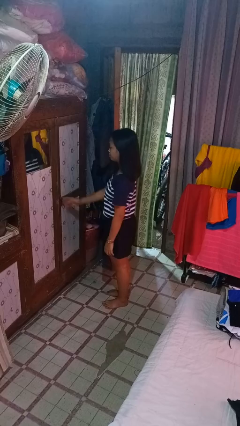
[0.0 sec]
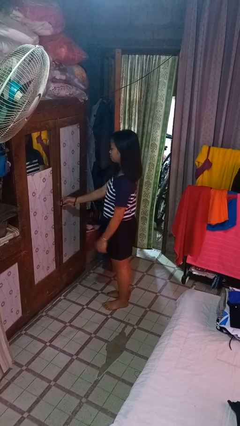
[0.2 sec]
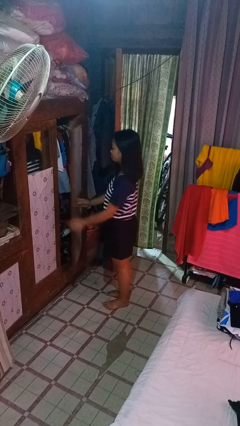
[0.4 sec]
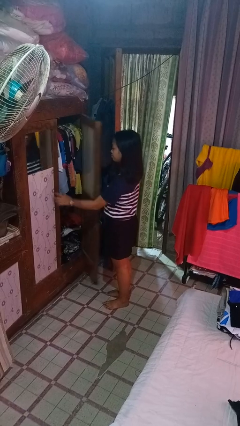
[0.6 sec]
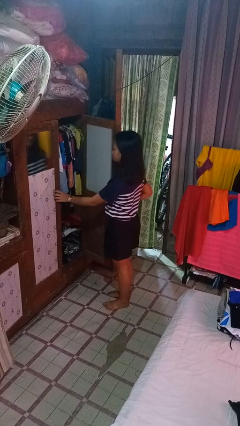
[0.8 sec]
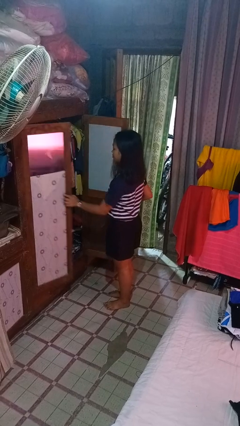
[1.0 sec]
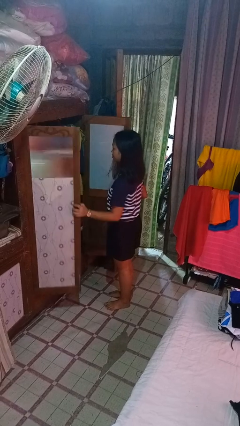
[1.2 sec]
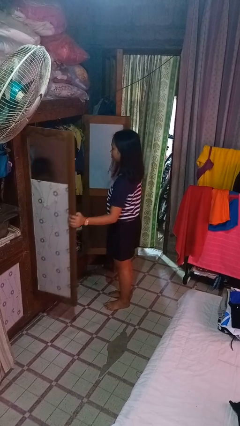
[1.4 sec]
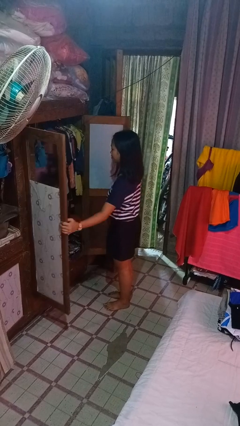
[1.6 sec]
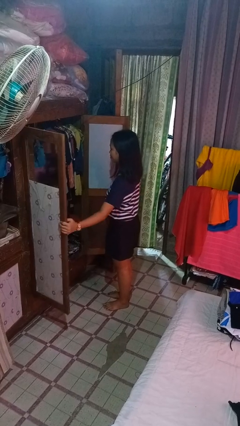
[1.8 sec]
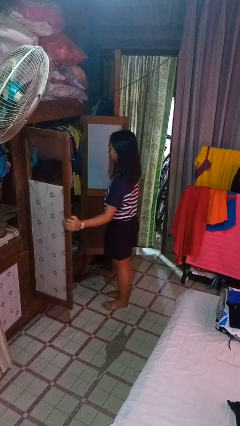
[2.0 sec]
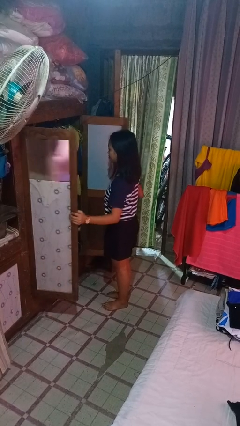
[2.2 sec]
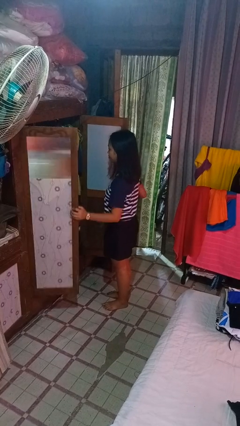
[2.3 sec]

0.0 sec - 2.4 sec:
person opens closet door

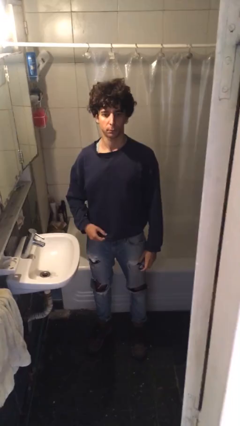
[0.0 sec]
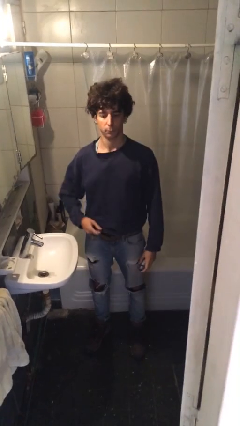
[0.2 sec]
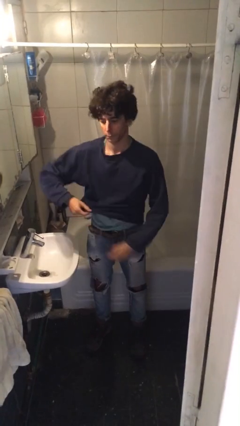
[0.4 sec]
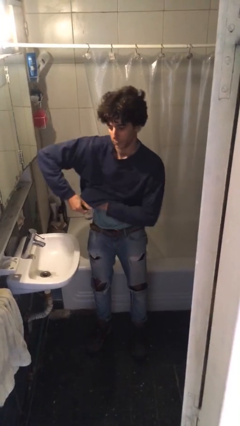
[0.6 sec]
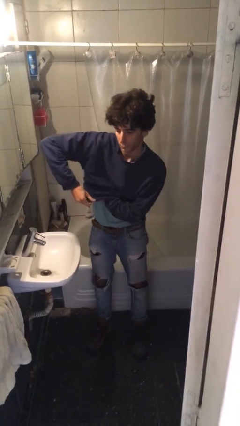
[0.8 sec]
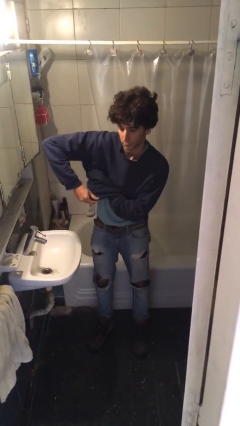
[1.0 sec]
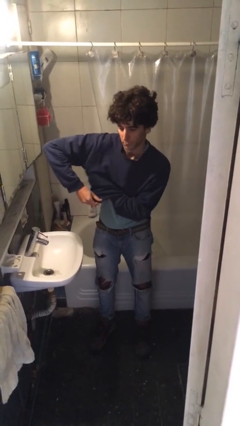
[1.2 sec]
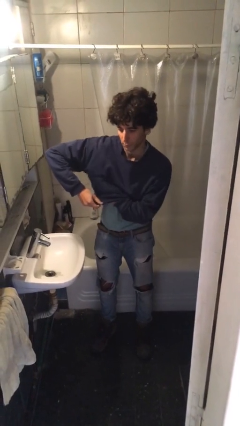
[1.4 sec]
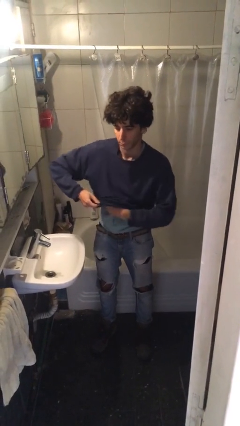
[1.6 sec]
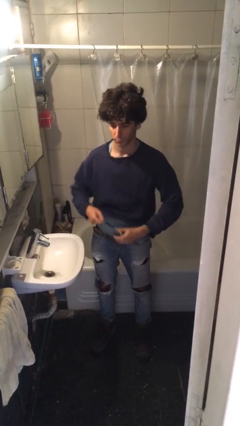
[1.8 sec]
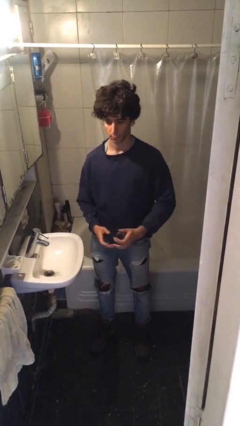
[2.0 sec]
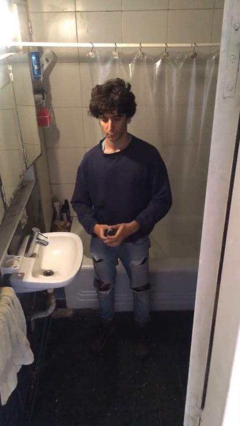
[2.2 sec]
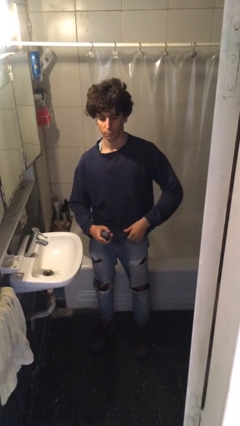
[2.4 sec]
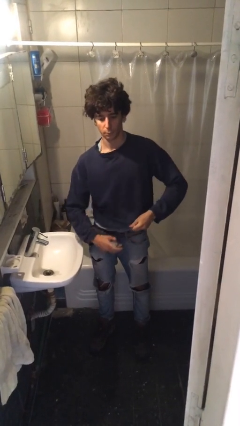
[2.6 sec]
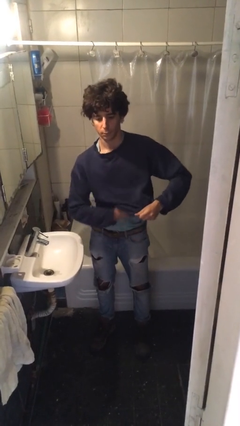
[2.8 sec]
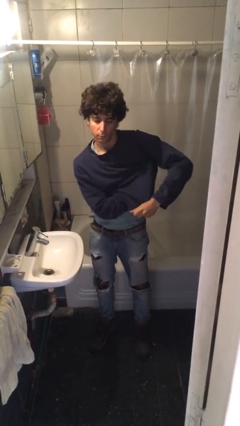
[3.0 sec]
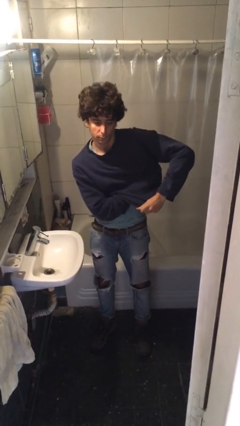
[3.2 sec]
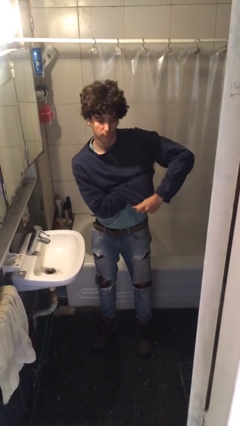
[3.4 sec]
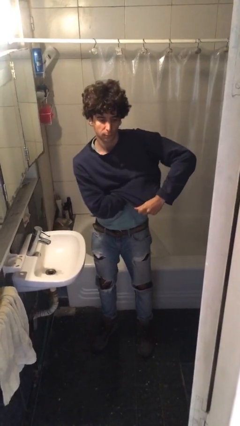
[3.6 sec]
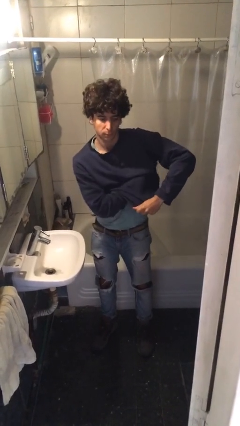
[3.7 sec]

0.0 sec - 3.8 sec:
person applies deodorant

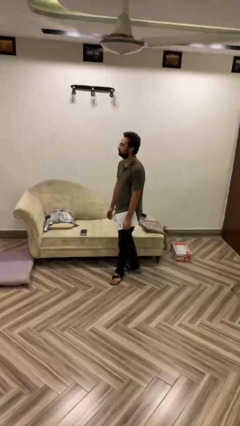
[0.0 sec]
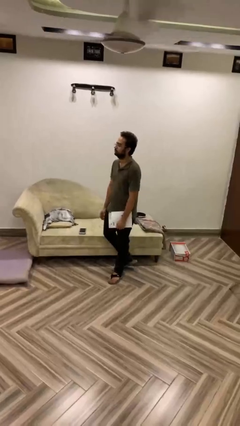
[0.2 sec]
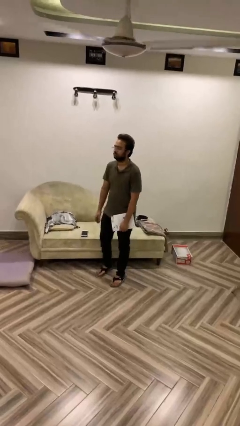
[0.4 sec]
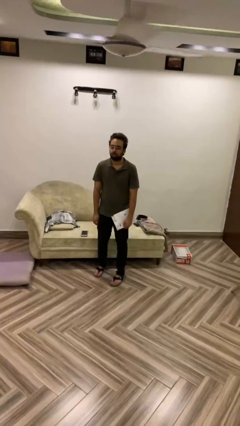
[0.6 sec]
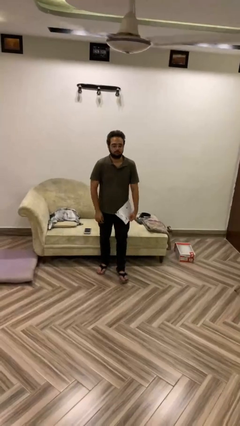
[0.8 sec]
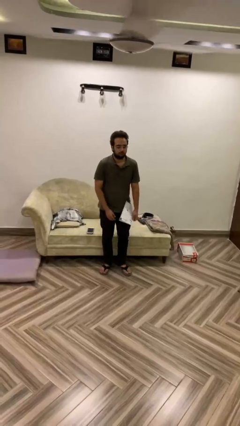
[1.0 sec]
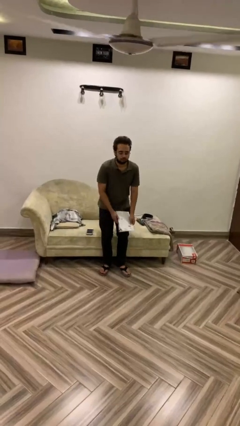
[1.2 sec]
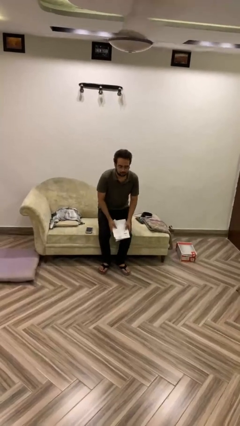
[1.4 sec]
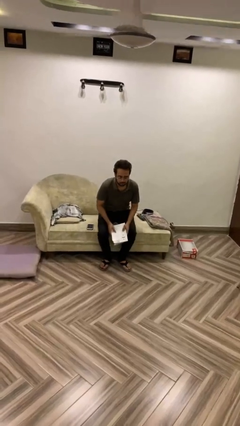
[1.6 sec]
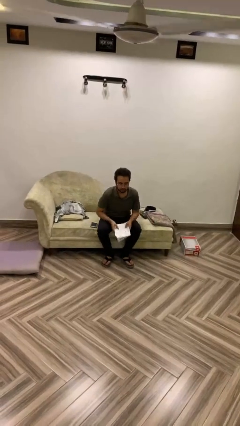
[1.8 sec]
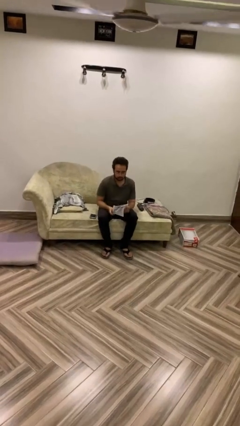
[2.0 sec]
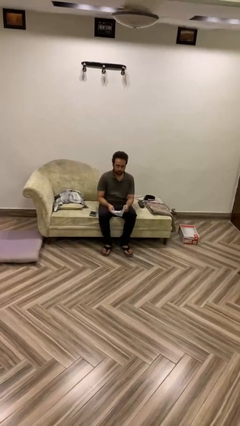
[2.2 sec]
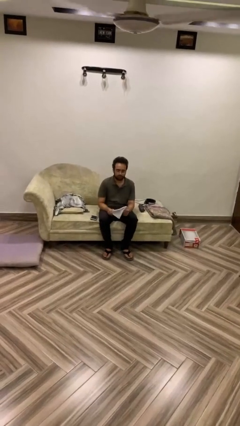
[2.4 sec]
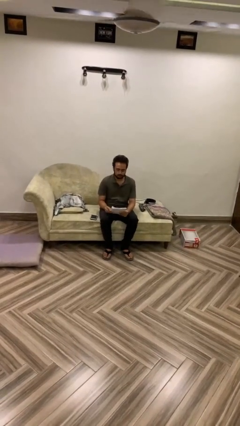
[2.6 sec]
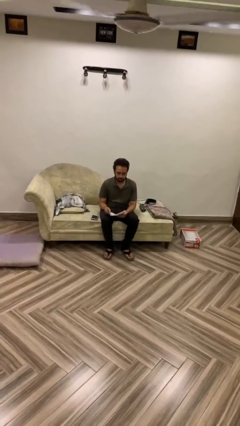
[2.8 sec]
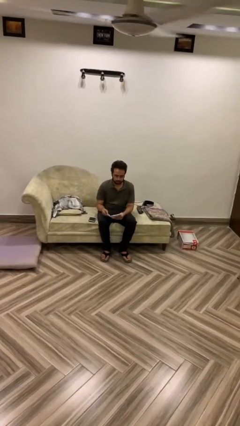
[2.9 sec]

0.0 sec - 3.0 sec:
person sits down

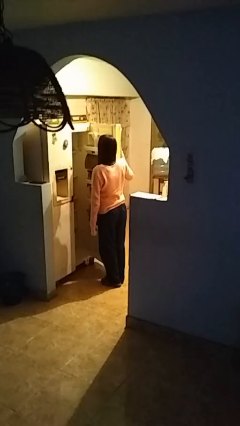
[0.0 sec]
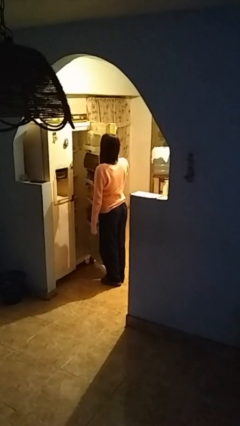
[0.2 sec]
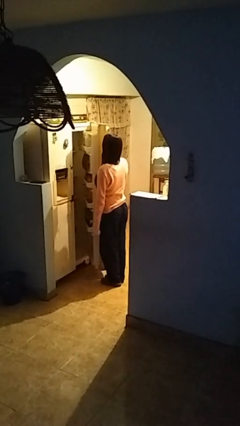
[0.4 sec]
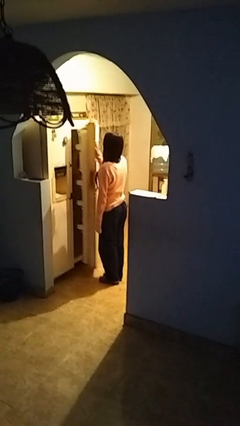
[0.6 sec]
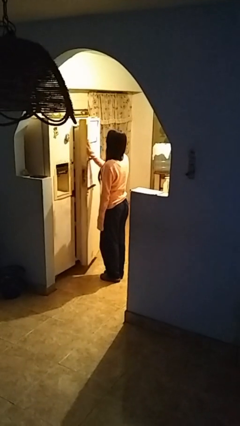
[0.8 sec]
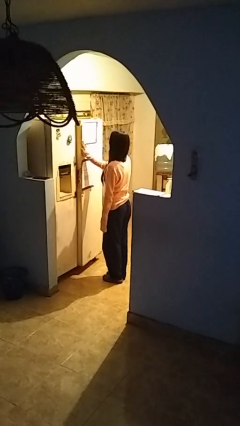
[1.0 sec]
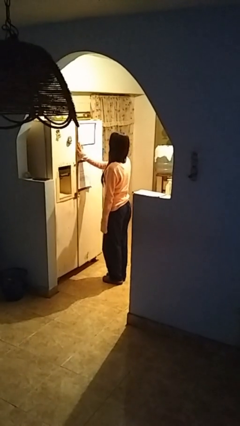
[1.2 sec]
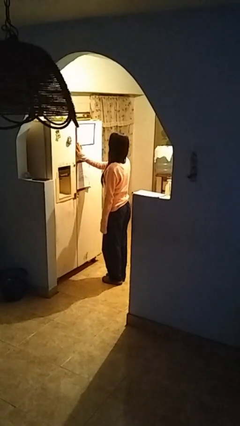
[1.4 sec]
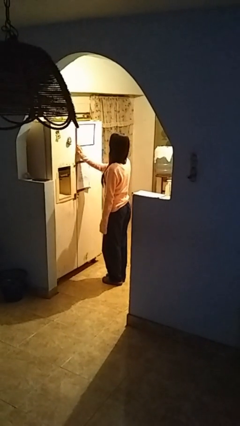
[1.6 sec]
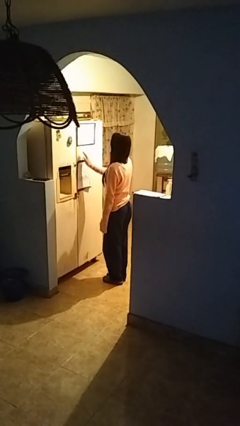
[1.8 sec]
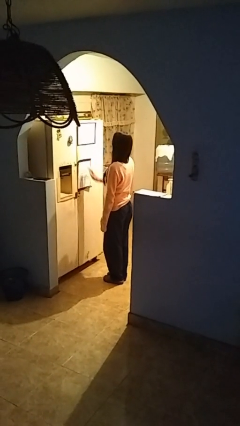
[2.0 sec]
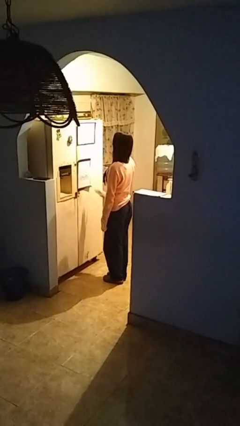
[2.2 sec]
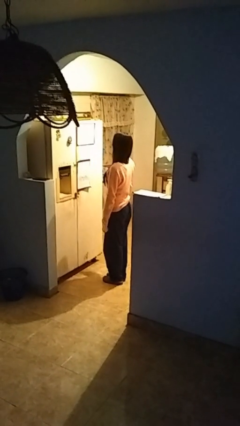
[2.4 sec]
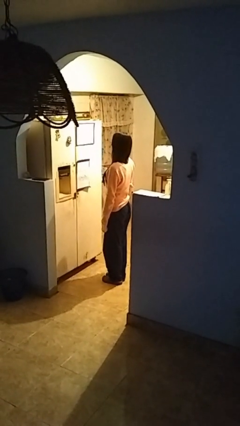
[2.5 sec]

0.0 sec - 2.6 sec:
person closes refrigerator

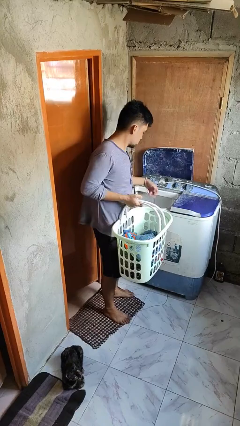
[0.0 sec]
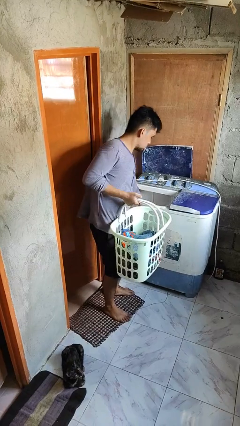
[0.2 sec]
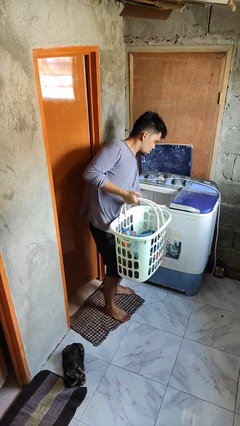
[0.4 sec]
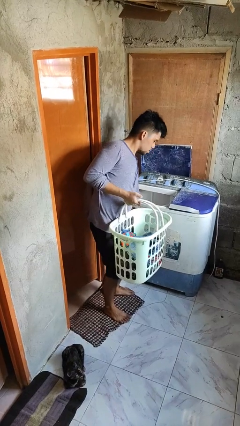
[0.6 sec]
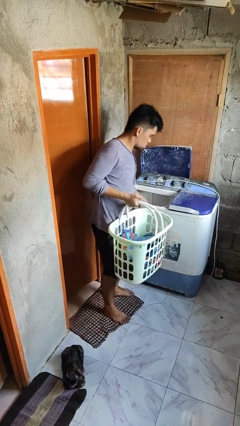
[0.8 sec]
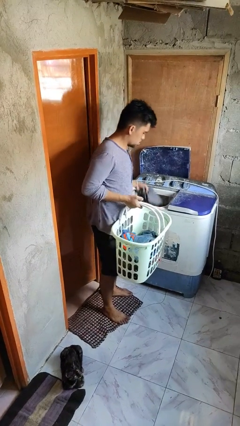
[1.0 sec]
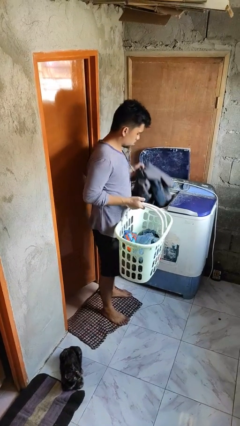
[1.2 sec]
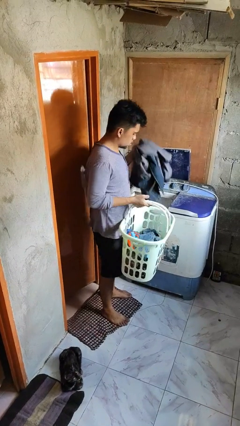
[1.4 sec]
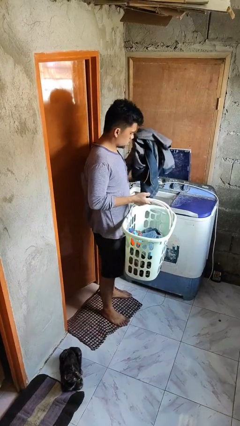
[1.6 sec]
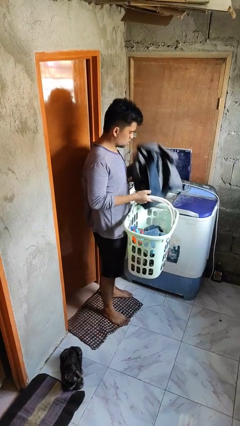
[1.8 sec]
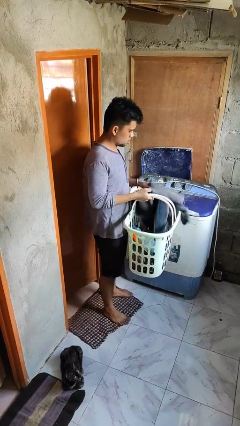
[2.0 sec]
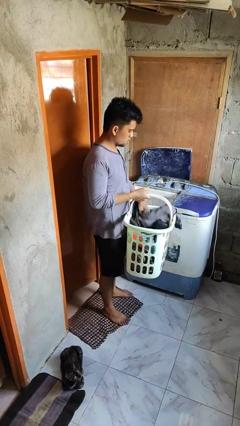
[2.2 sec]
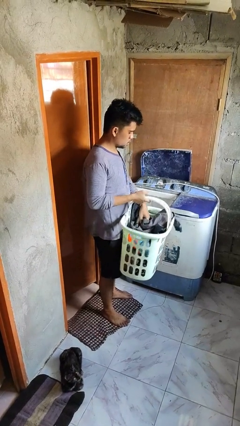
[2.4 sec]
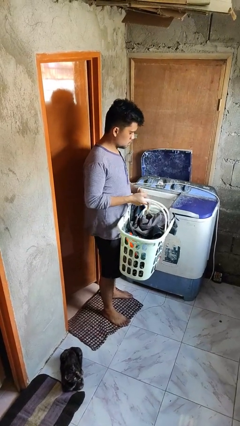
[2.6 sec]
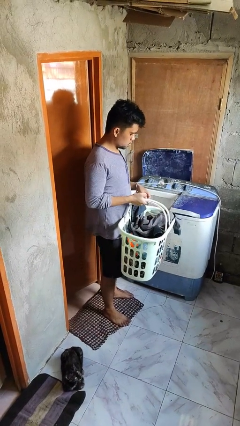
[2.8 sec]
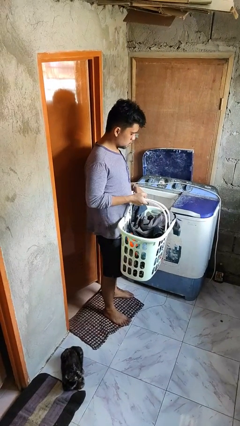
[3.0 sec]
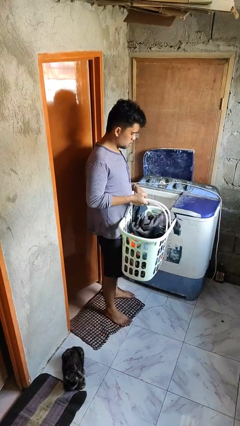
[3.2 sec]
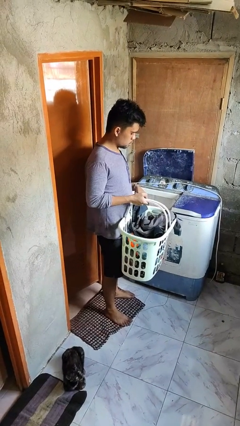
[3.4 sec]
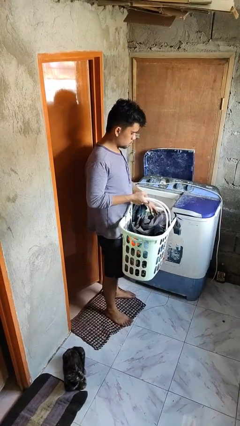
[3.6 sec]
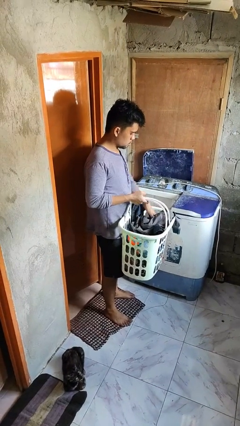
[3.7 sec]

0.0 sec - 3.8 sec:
person unloads clotheswasher

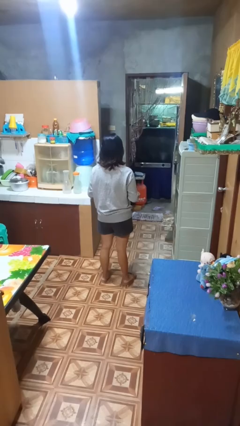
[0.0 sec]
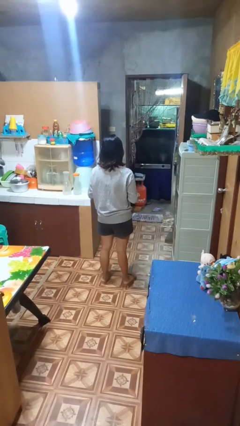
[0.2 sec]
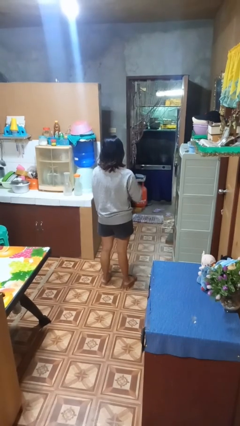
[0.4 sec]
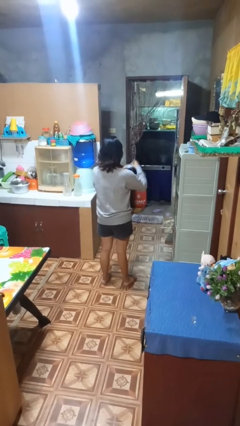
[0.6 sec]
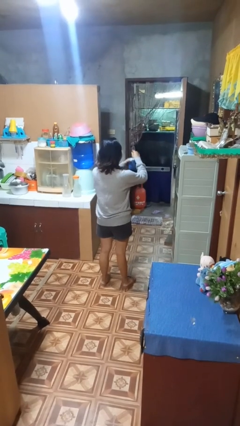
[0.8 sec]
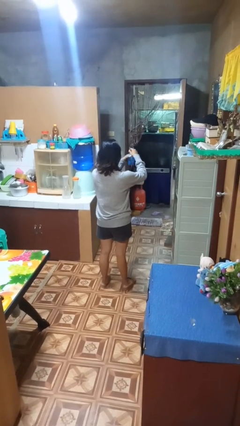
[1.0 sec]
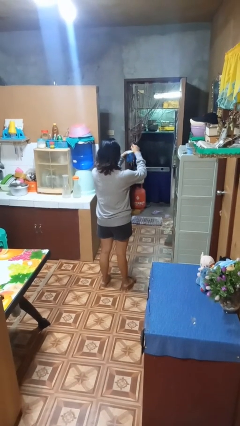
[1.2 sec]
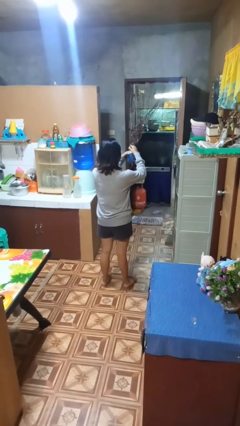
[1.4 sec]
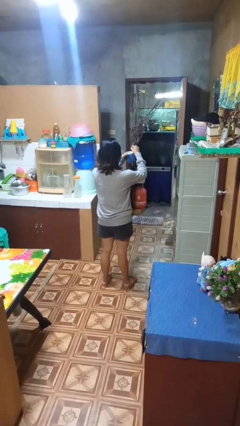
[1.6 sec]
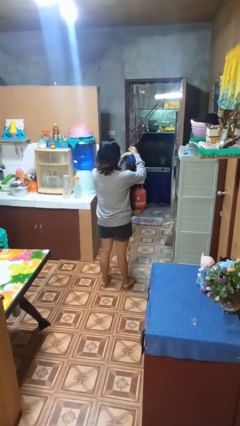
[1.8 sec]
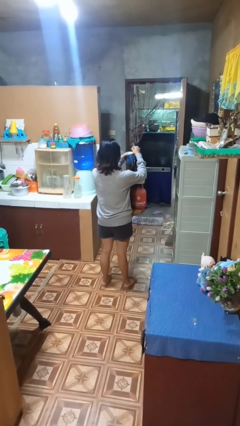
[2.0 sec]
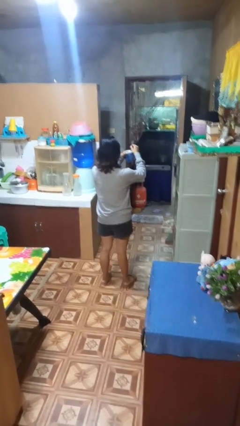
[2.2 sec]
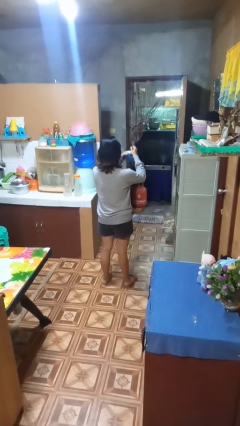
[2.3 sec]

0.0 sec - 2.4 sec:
person stirs mug
